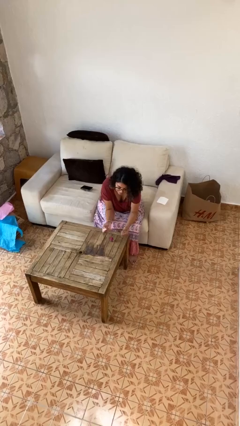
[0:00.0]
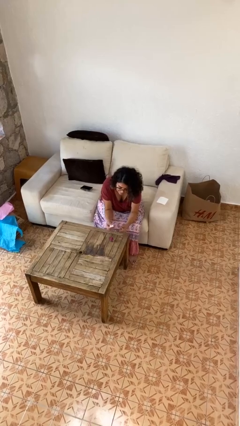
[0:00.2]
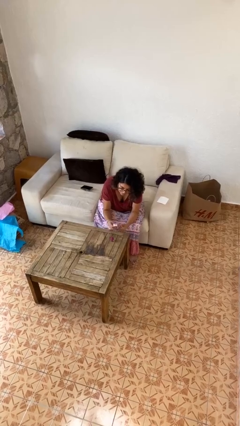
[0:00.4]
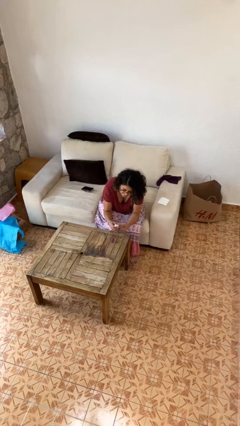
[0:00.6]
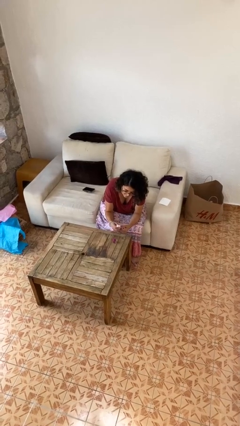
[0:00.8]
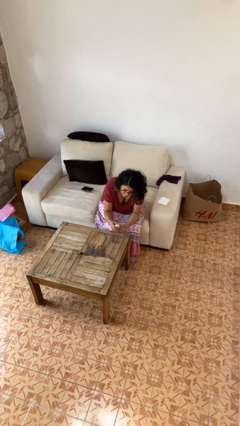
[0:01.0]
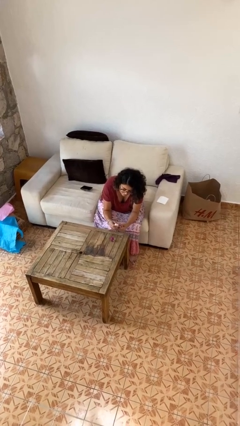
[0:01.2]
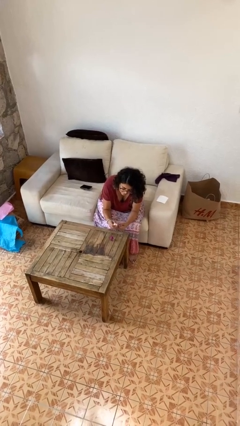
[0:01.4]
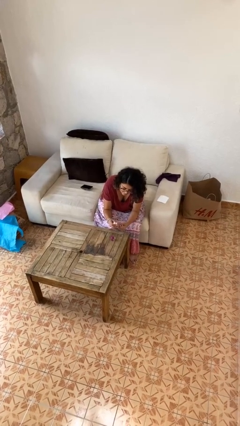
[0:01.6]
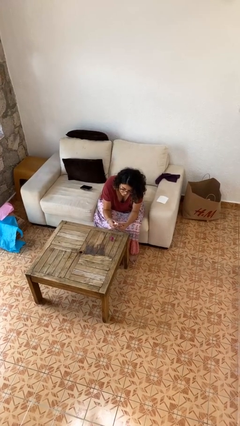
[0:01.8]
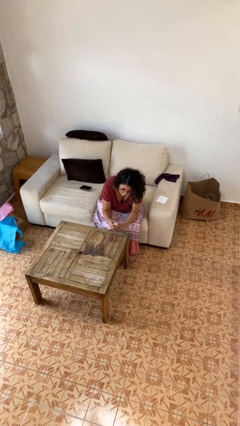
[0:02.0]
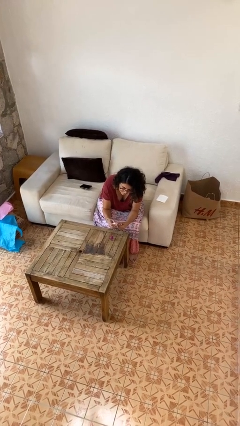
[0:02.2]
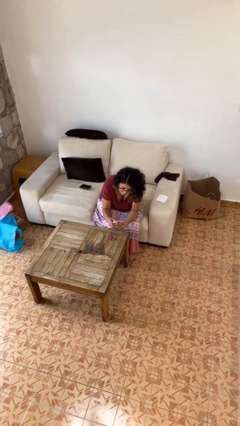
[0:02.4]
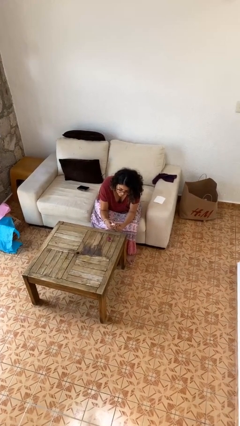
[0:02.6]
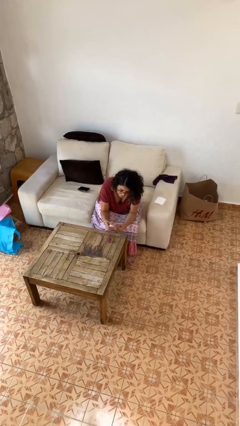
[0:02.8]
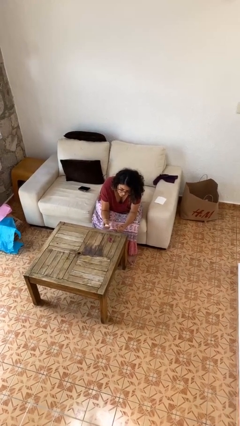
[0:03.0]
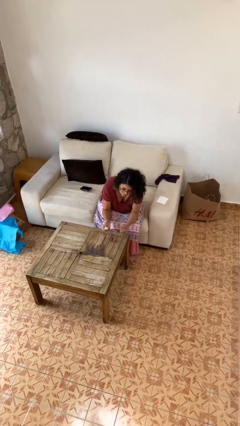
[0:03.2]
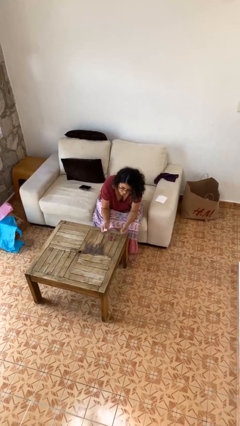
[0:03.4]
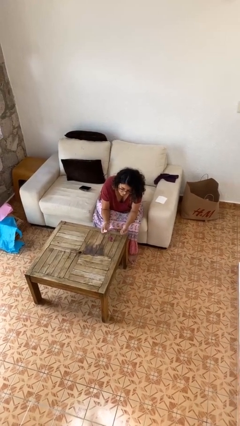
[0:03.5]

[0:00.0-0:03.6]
person paints fingernails

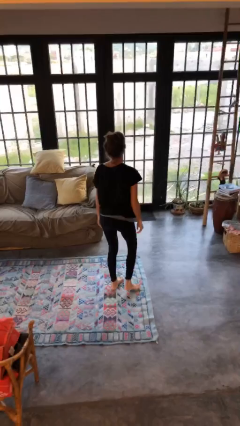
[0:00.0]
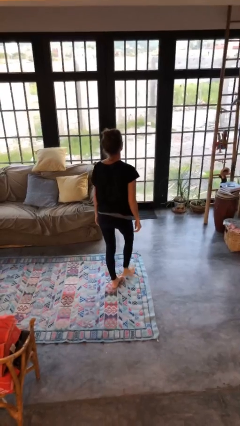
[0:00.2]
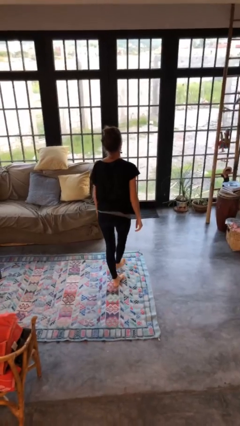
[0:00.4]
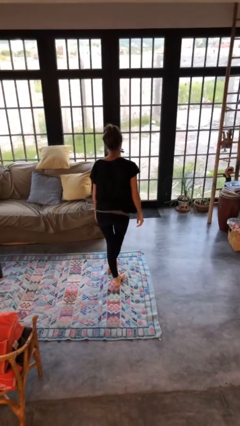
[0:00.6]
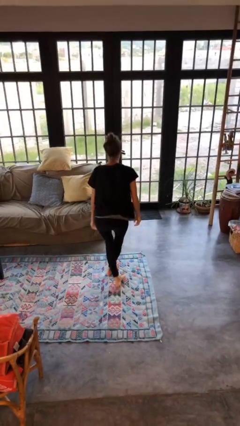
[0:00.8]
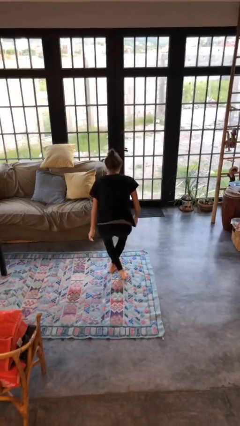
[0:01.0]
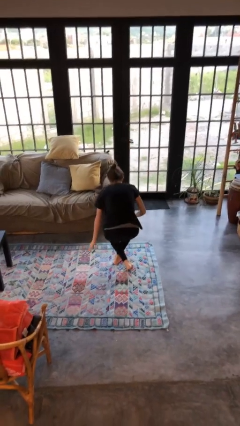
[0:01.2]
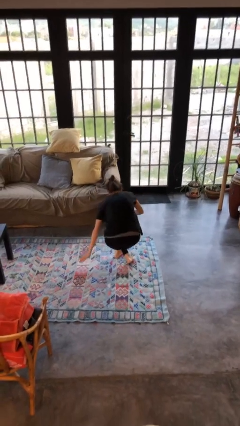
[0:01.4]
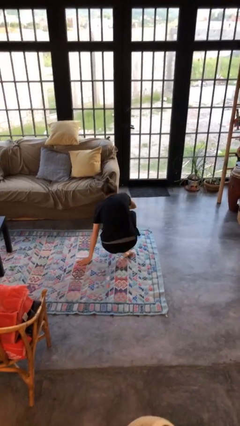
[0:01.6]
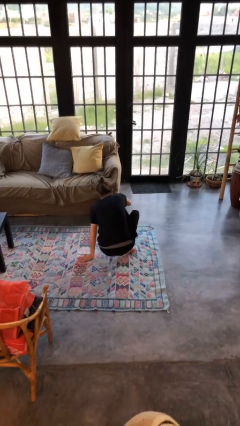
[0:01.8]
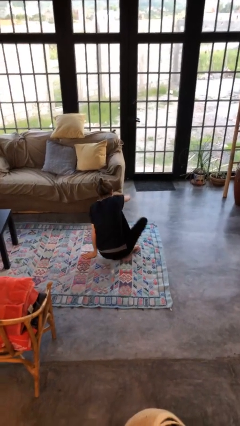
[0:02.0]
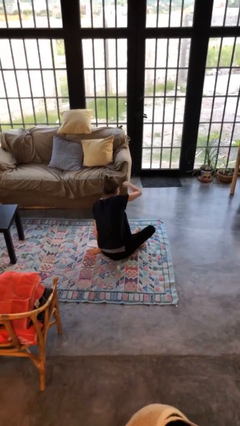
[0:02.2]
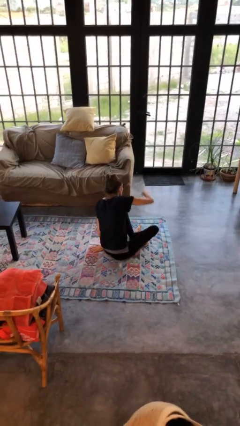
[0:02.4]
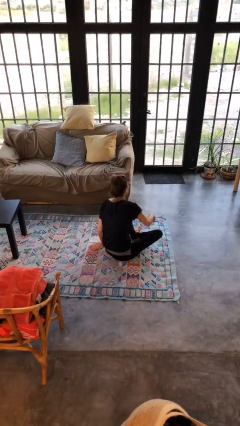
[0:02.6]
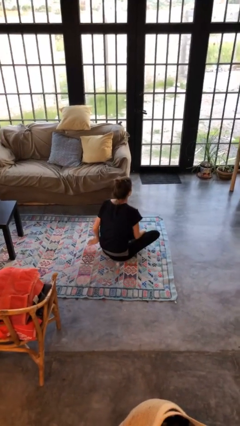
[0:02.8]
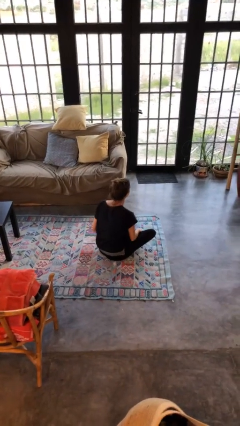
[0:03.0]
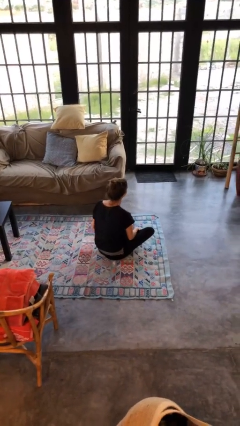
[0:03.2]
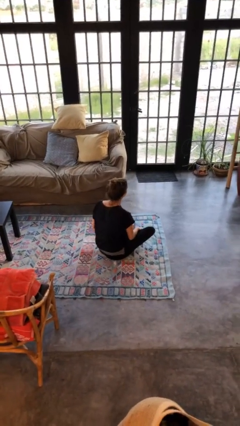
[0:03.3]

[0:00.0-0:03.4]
person sits crisscross

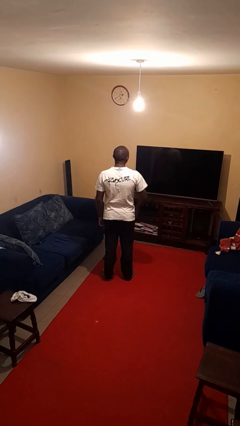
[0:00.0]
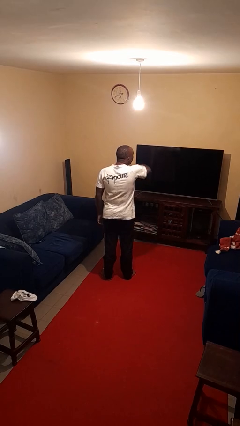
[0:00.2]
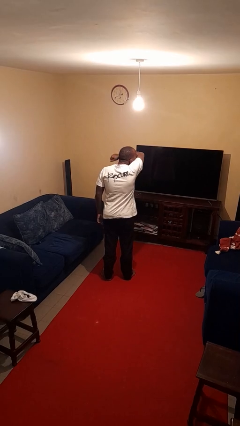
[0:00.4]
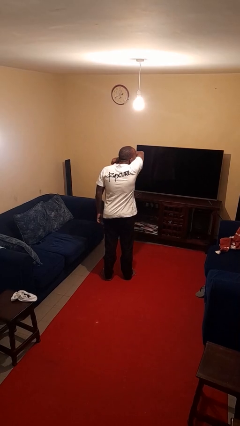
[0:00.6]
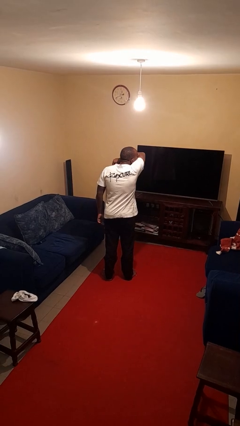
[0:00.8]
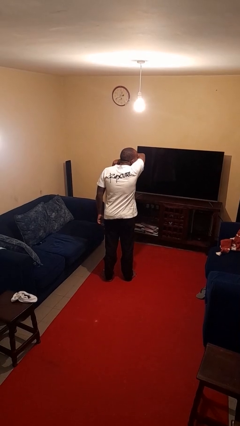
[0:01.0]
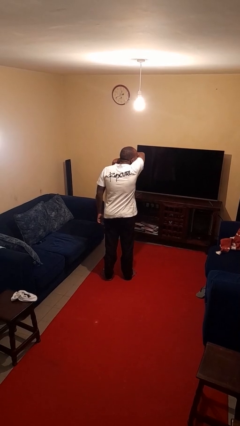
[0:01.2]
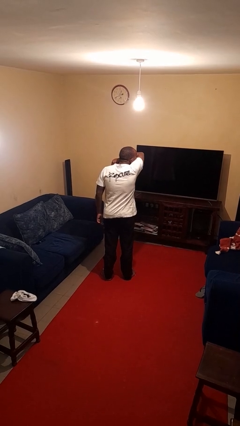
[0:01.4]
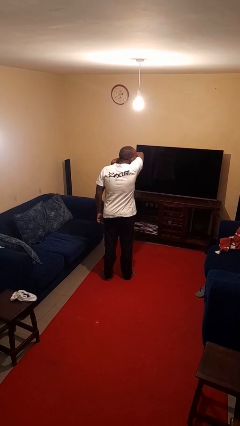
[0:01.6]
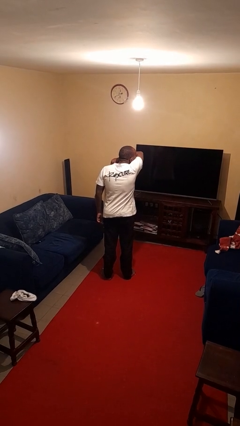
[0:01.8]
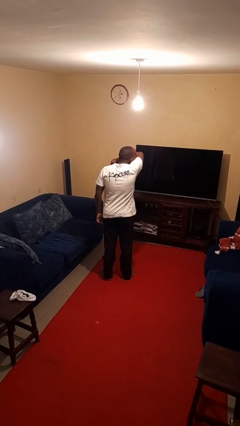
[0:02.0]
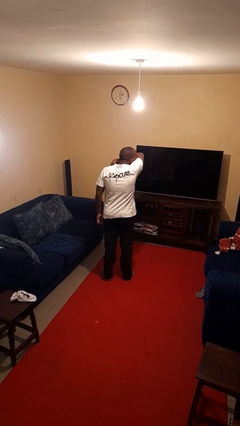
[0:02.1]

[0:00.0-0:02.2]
person sneezes into arm

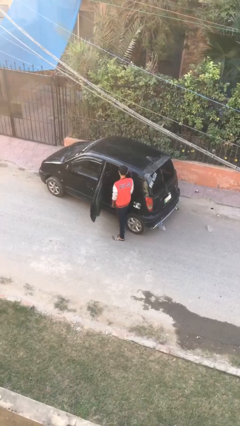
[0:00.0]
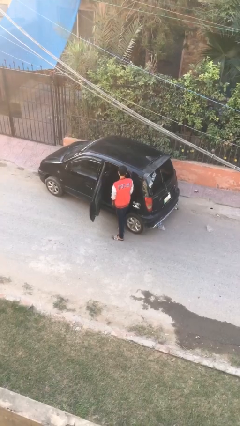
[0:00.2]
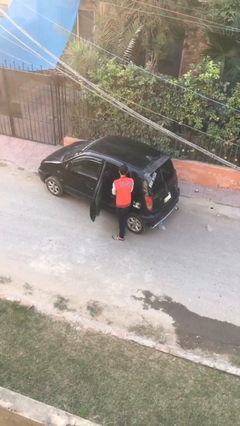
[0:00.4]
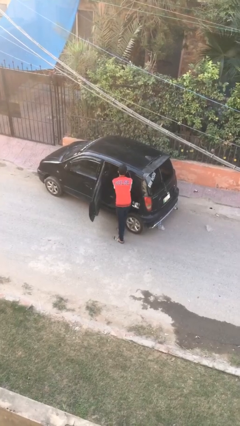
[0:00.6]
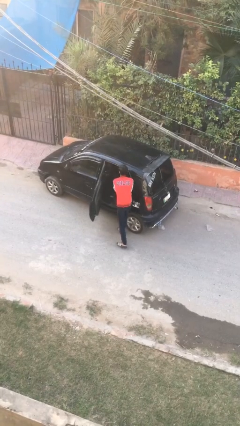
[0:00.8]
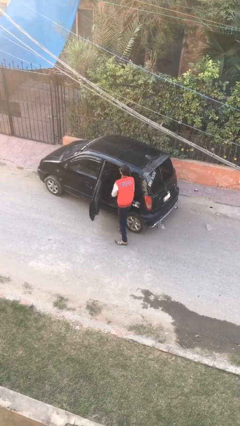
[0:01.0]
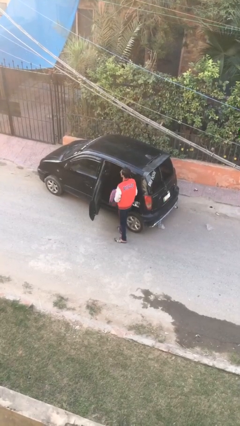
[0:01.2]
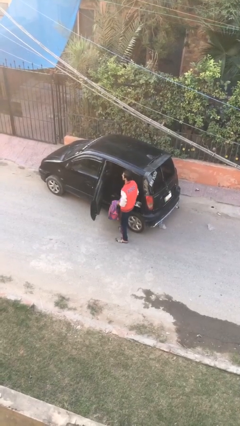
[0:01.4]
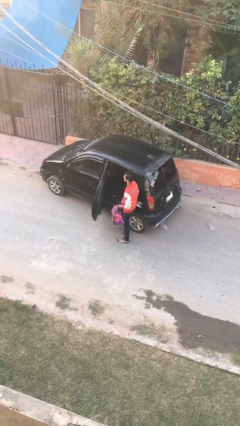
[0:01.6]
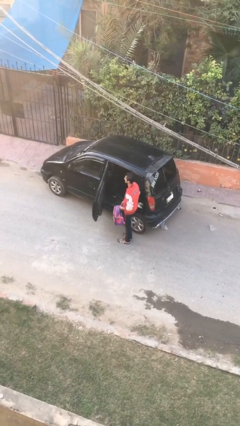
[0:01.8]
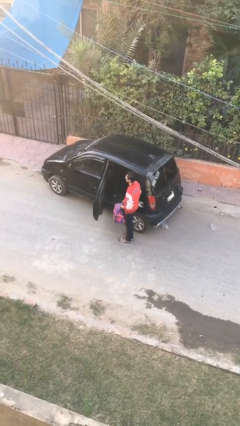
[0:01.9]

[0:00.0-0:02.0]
person unloads car

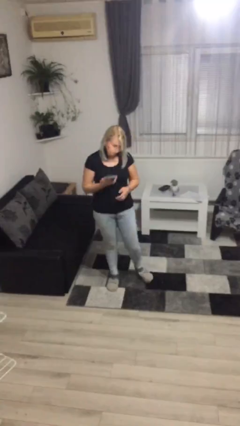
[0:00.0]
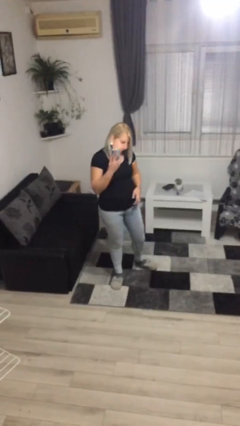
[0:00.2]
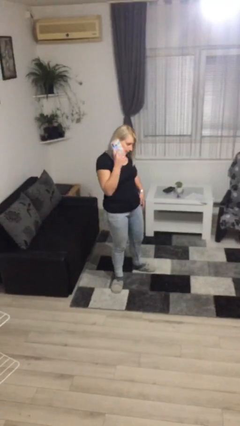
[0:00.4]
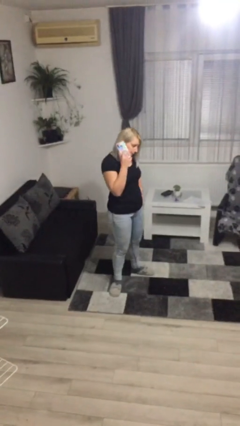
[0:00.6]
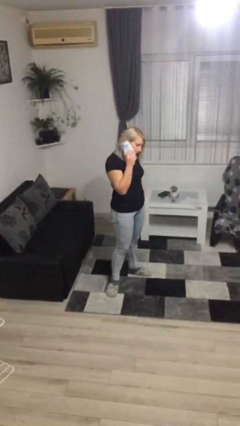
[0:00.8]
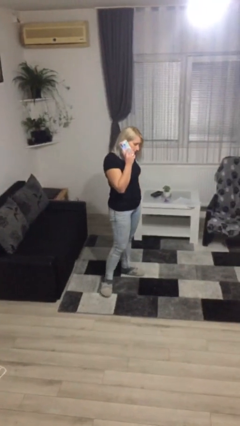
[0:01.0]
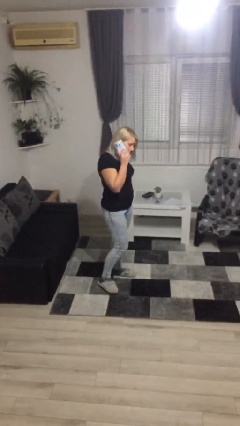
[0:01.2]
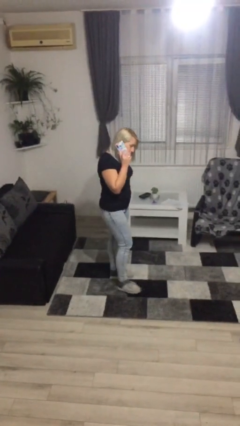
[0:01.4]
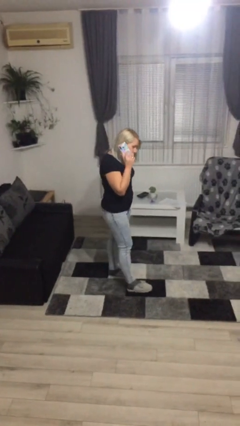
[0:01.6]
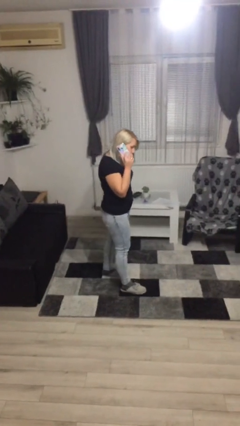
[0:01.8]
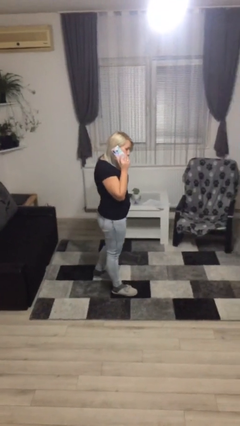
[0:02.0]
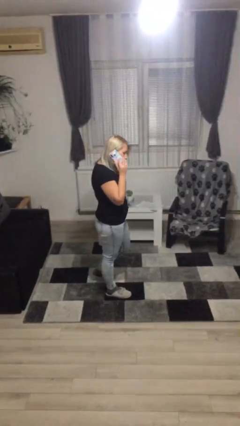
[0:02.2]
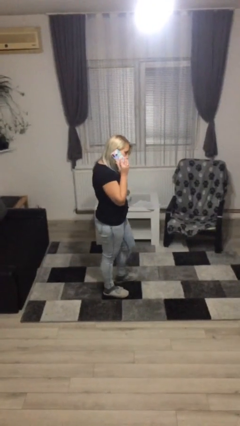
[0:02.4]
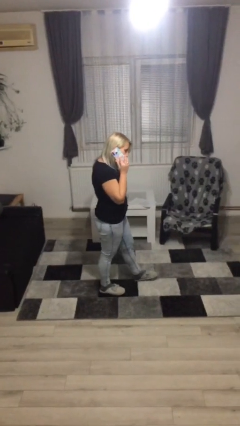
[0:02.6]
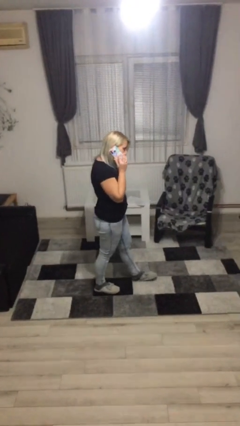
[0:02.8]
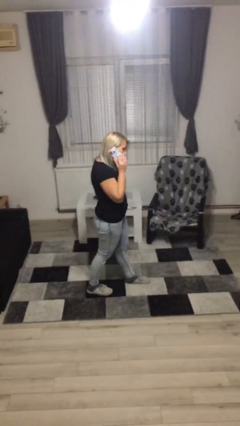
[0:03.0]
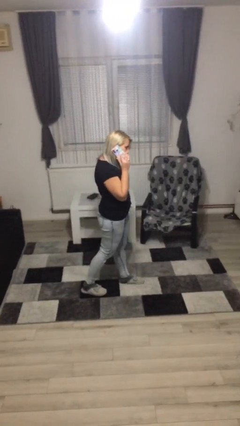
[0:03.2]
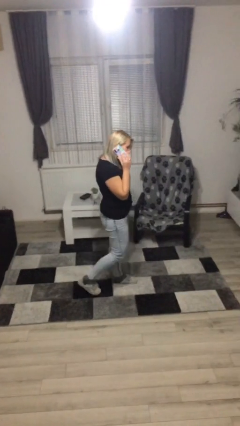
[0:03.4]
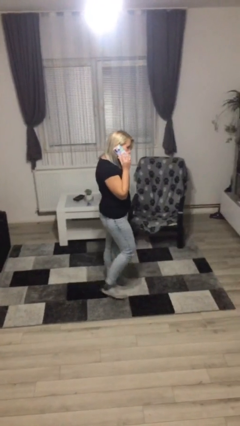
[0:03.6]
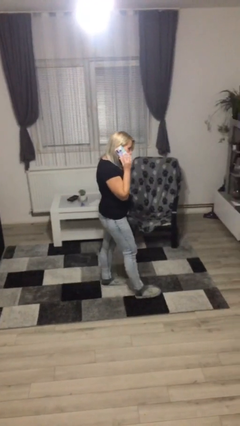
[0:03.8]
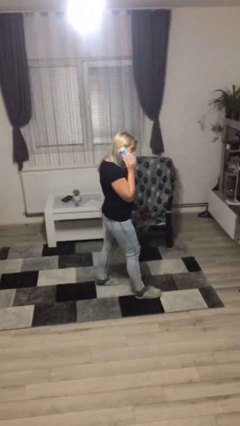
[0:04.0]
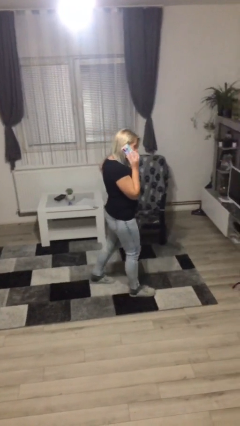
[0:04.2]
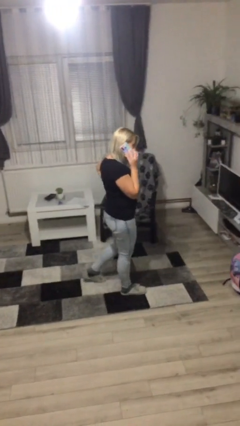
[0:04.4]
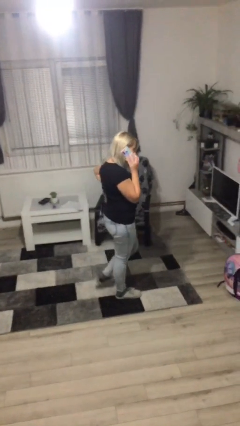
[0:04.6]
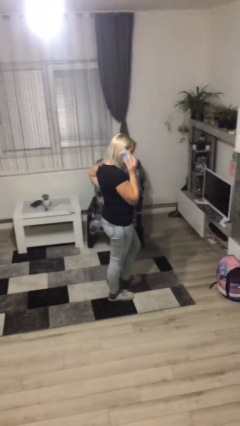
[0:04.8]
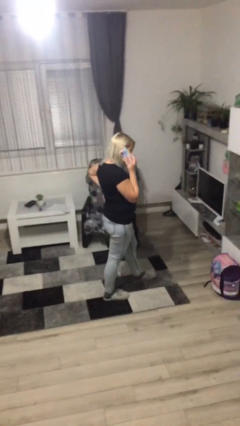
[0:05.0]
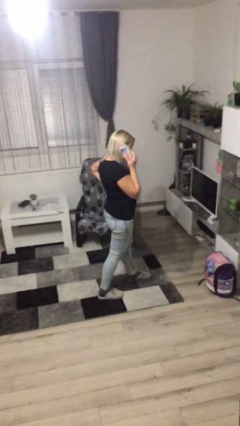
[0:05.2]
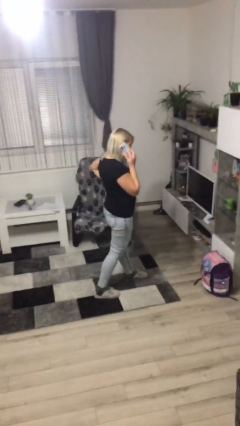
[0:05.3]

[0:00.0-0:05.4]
person talks on phone

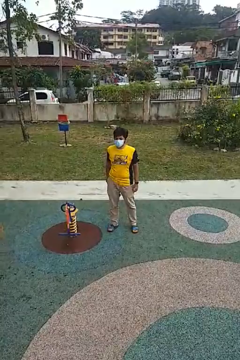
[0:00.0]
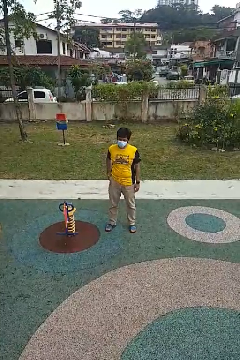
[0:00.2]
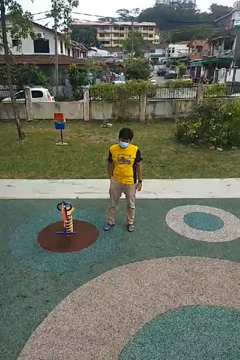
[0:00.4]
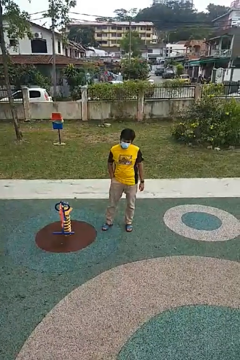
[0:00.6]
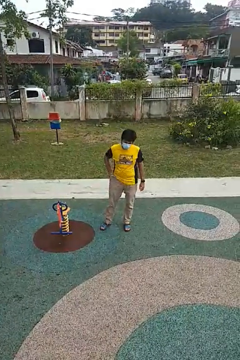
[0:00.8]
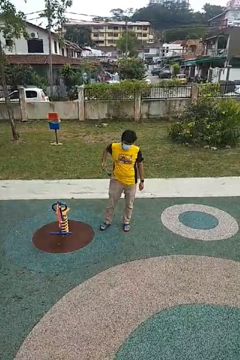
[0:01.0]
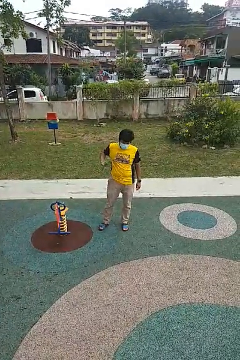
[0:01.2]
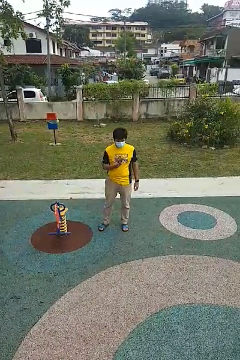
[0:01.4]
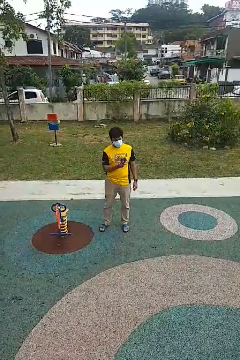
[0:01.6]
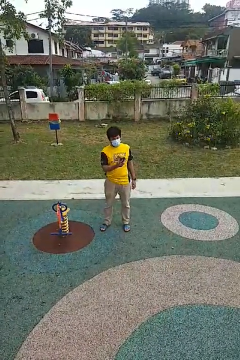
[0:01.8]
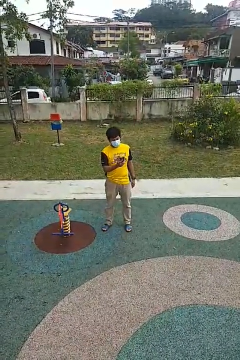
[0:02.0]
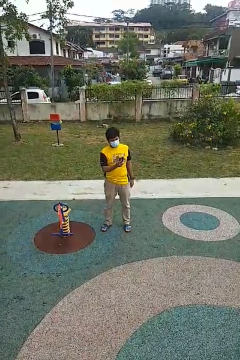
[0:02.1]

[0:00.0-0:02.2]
person takes phone from pocket
